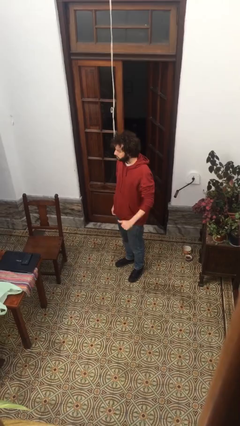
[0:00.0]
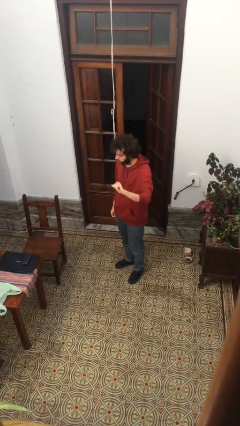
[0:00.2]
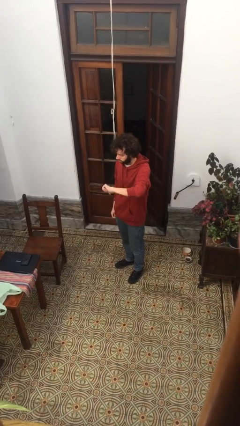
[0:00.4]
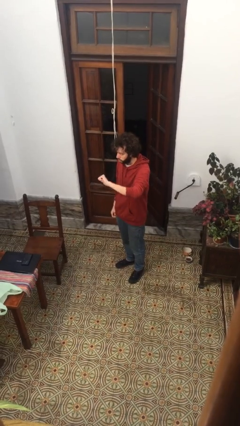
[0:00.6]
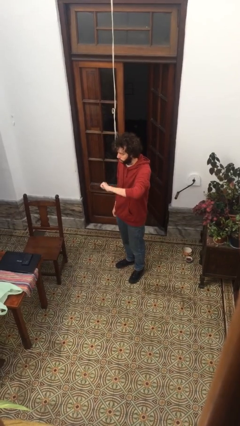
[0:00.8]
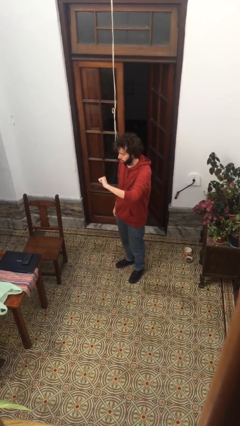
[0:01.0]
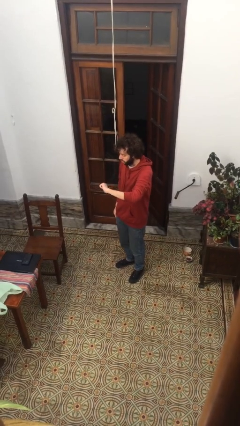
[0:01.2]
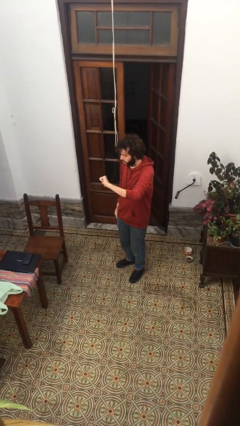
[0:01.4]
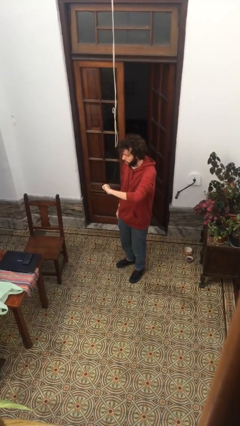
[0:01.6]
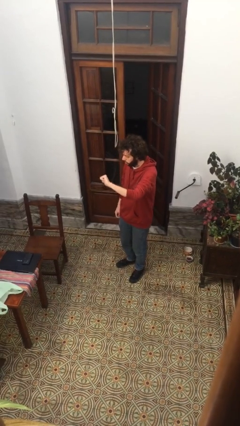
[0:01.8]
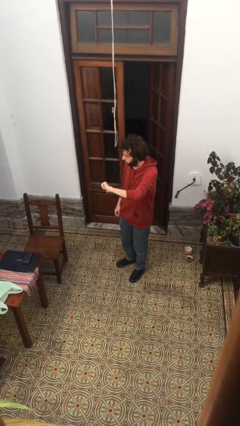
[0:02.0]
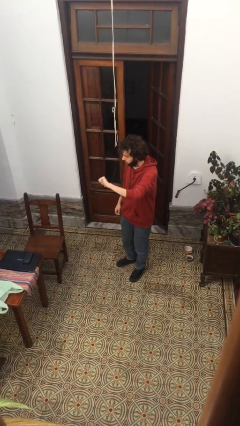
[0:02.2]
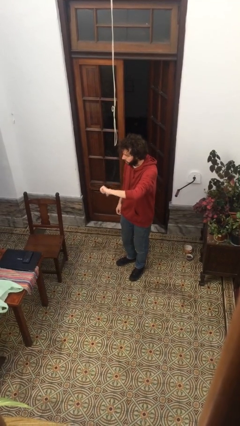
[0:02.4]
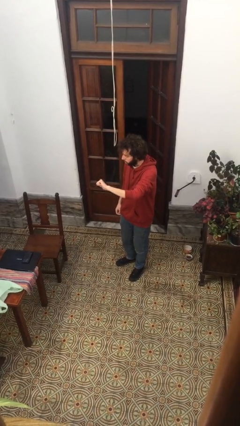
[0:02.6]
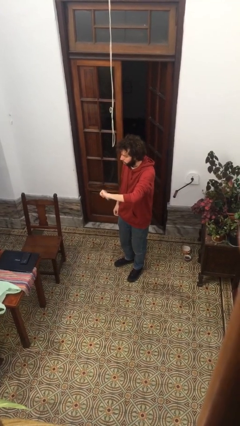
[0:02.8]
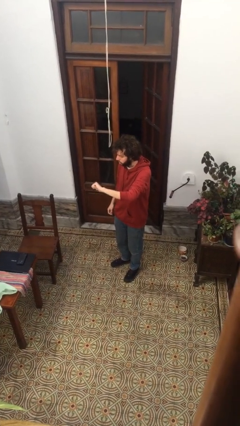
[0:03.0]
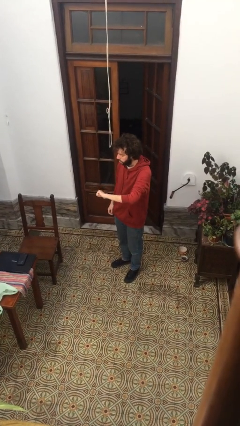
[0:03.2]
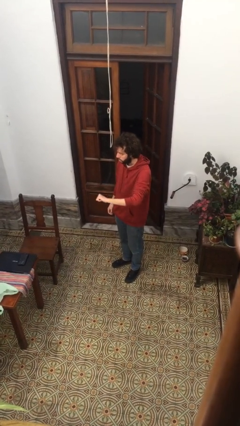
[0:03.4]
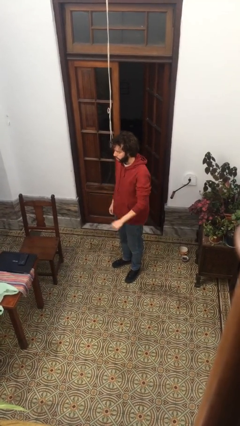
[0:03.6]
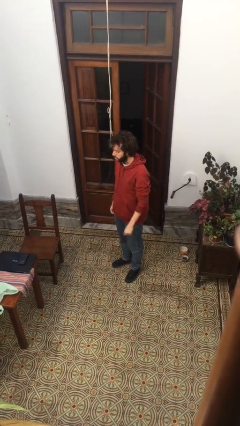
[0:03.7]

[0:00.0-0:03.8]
person gestures thumbs down

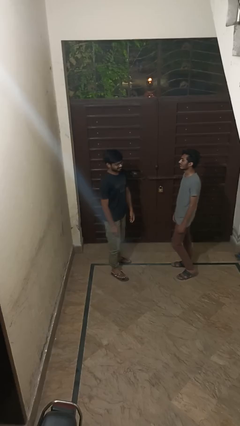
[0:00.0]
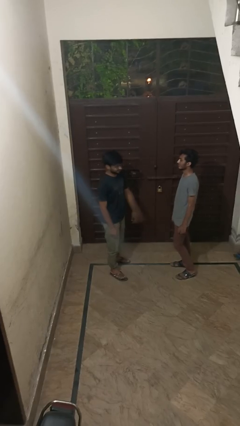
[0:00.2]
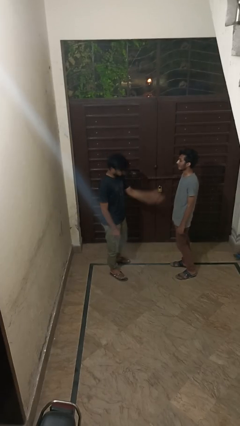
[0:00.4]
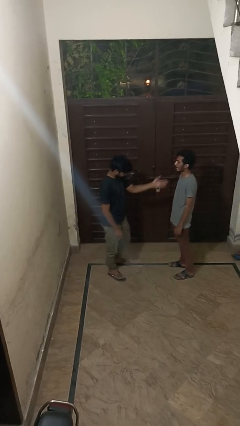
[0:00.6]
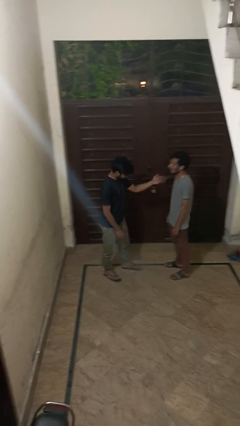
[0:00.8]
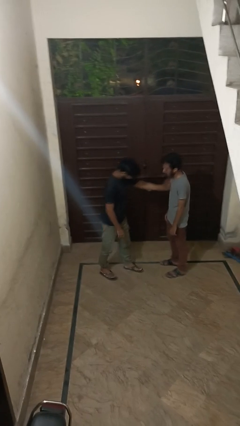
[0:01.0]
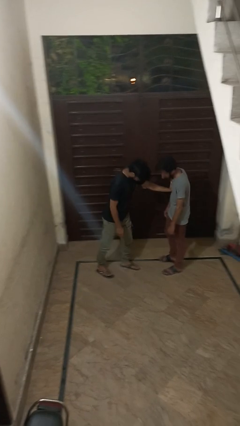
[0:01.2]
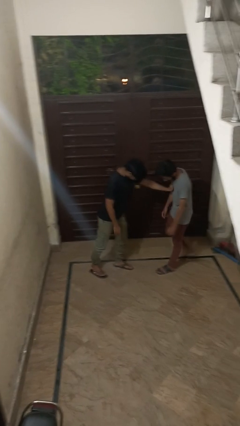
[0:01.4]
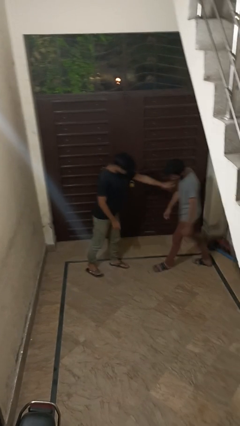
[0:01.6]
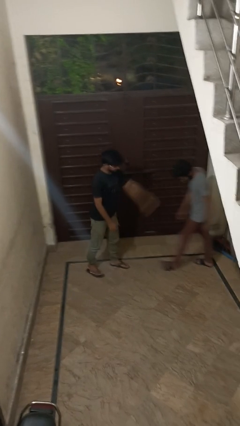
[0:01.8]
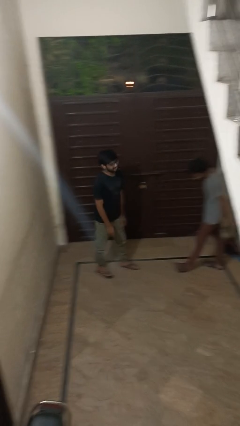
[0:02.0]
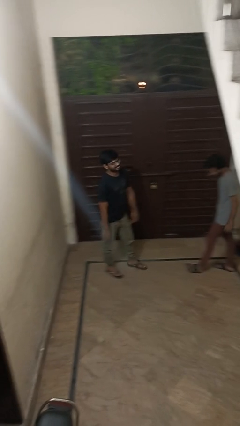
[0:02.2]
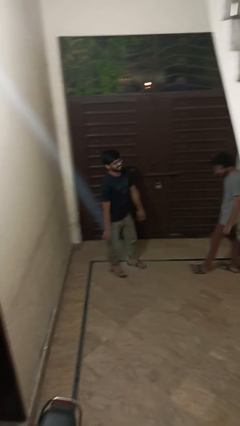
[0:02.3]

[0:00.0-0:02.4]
person shoves person

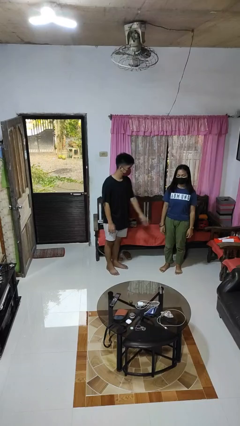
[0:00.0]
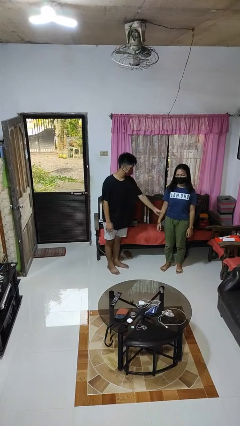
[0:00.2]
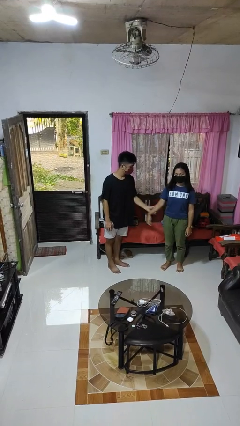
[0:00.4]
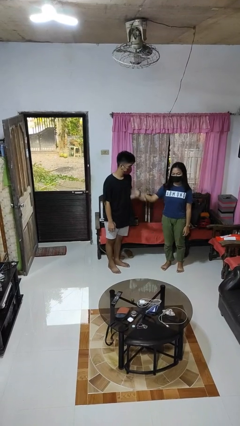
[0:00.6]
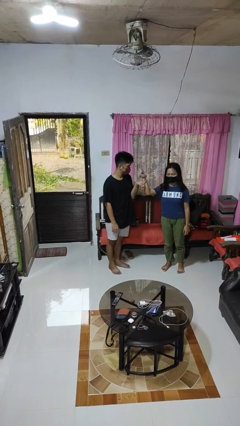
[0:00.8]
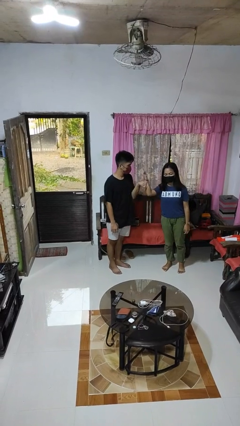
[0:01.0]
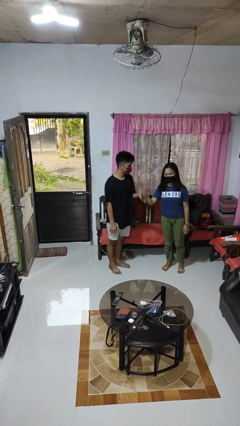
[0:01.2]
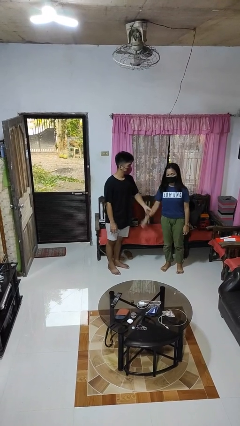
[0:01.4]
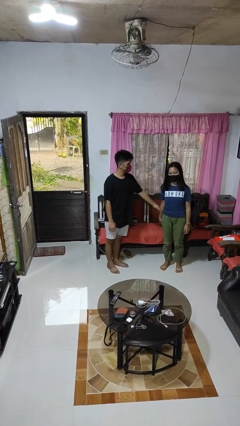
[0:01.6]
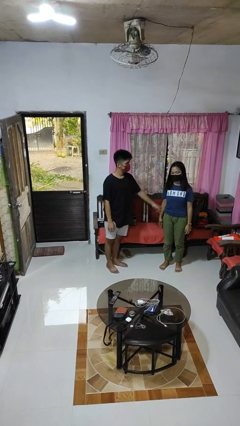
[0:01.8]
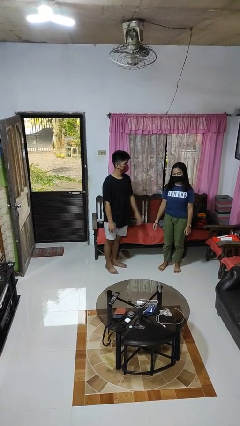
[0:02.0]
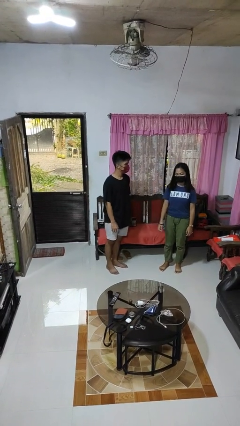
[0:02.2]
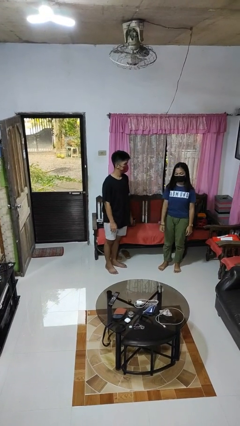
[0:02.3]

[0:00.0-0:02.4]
person grabs person by forearm

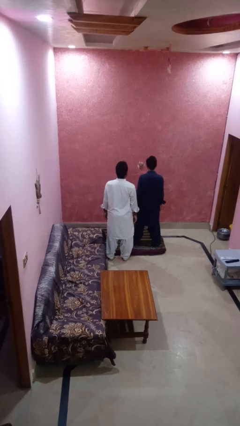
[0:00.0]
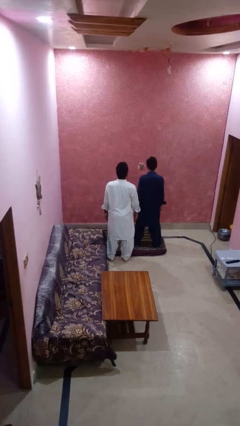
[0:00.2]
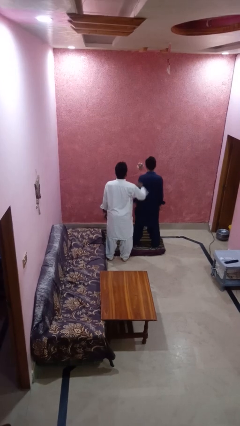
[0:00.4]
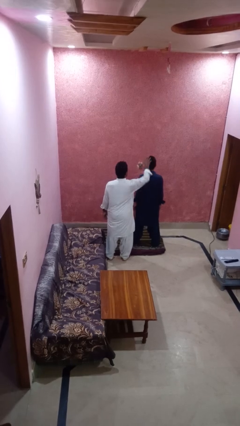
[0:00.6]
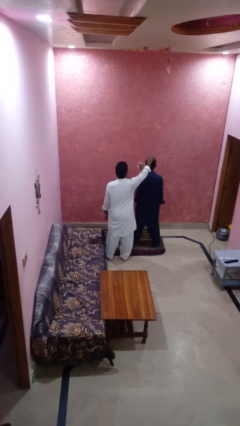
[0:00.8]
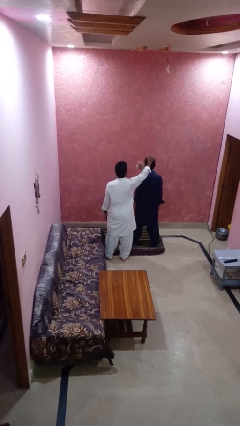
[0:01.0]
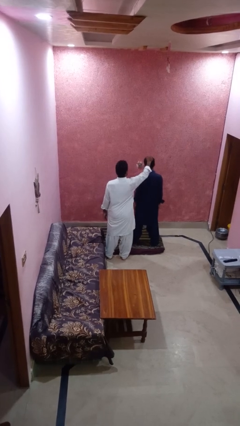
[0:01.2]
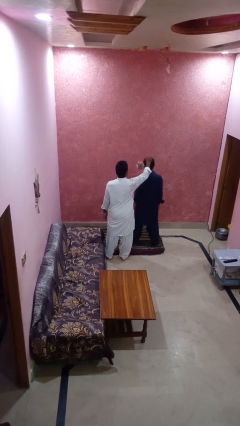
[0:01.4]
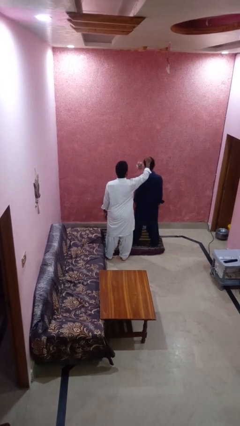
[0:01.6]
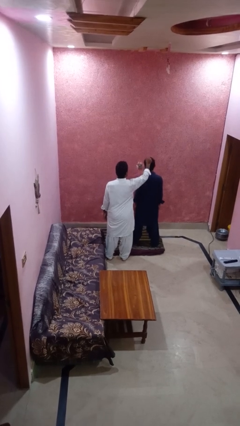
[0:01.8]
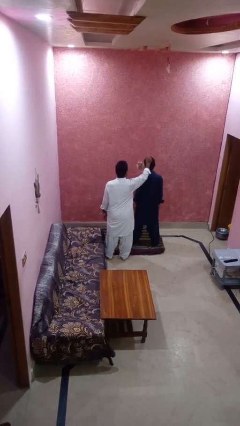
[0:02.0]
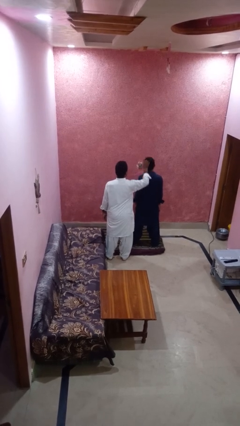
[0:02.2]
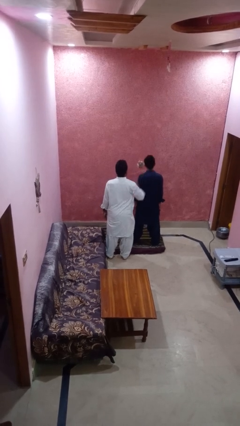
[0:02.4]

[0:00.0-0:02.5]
person grabs person by hair

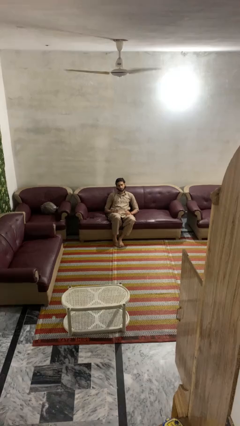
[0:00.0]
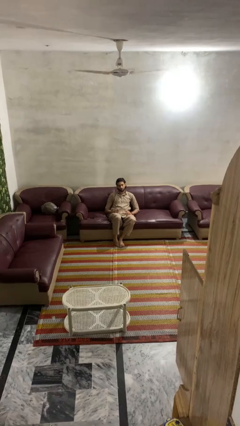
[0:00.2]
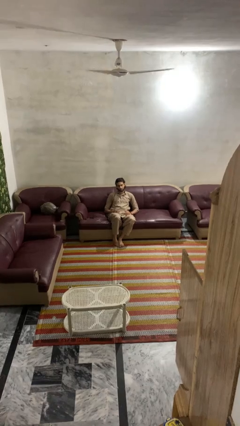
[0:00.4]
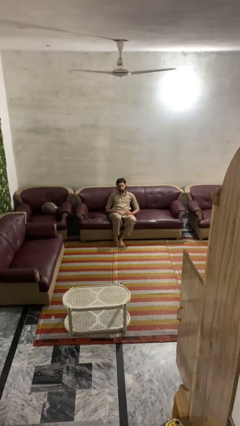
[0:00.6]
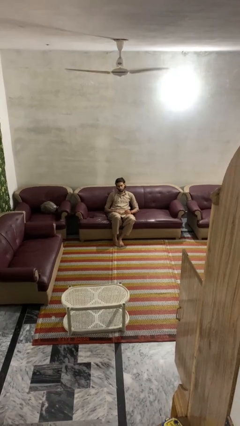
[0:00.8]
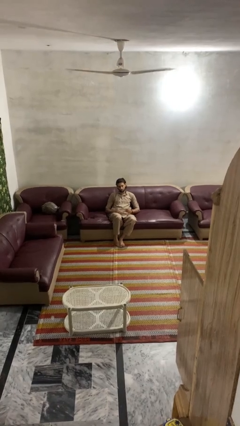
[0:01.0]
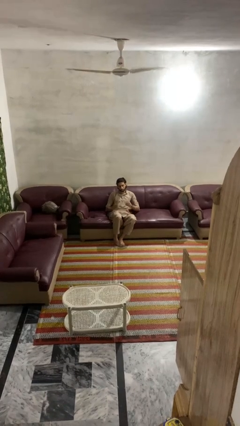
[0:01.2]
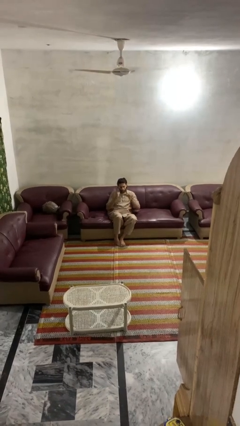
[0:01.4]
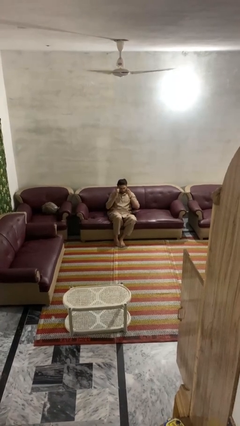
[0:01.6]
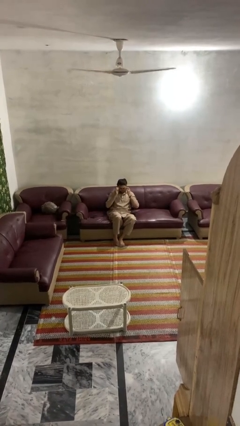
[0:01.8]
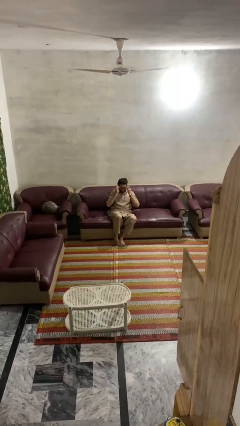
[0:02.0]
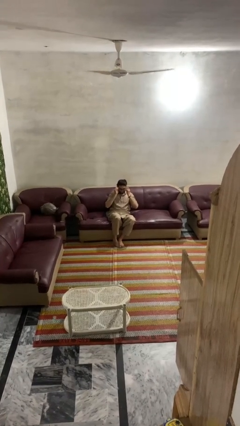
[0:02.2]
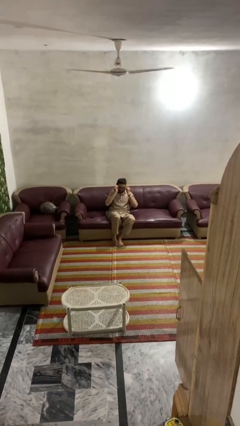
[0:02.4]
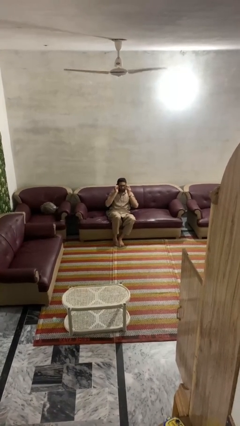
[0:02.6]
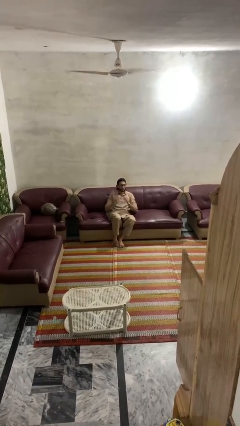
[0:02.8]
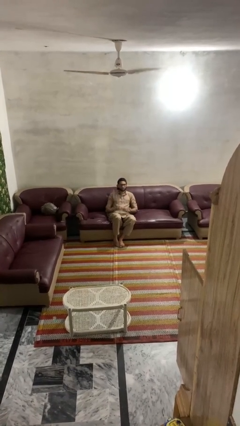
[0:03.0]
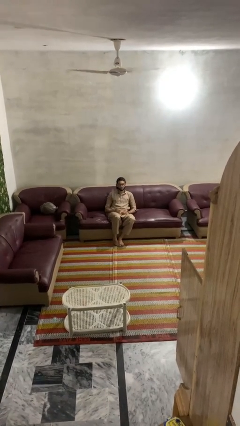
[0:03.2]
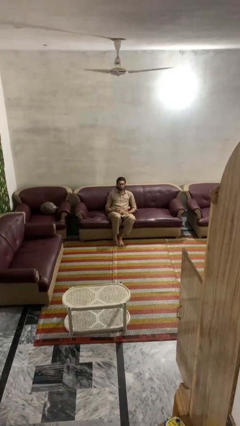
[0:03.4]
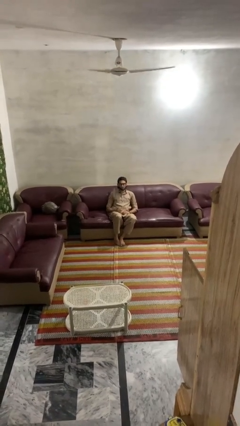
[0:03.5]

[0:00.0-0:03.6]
person puts on glasses

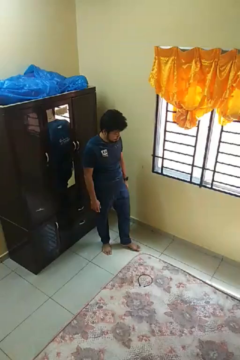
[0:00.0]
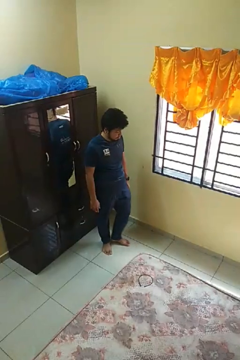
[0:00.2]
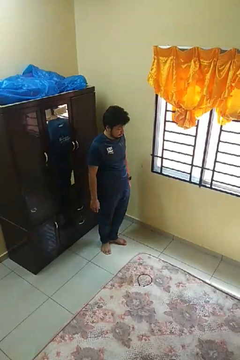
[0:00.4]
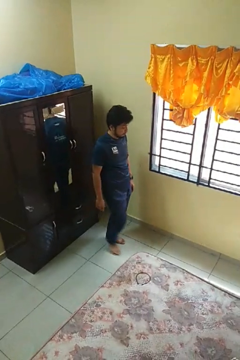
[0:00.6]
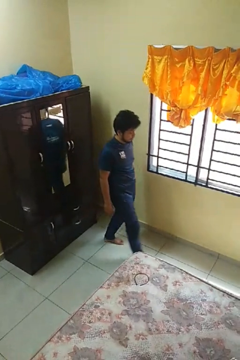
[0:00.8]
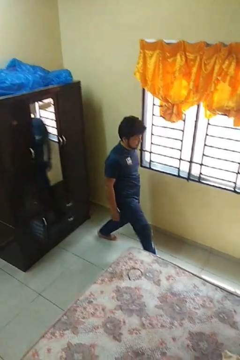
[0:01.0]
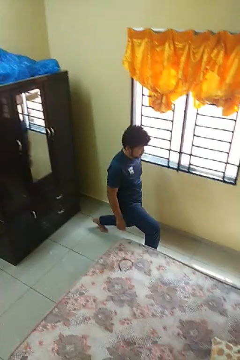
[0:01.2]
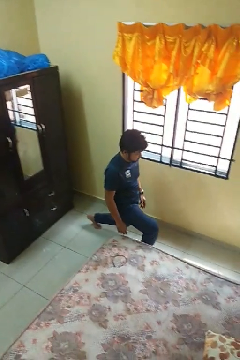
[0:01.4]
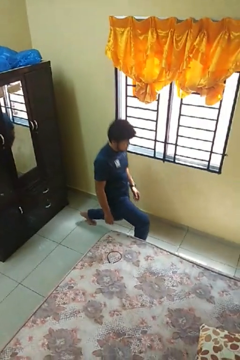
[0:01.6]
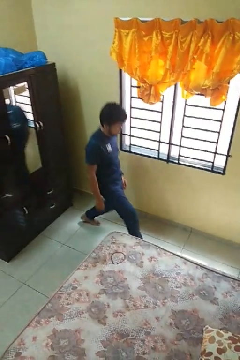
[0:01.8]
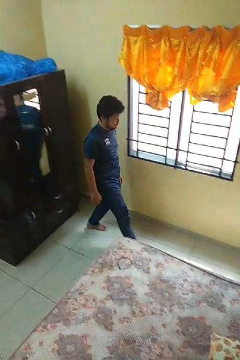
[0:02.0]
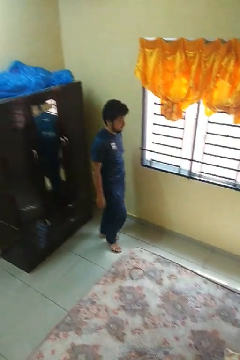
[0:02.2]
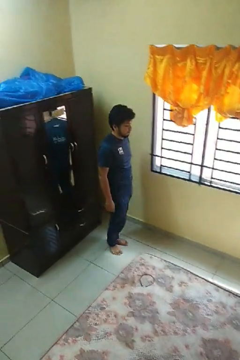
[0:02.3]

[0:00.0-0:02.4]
person exercises with lunges

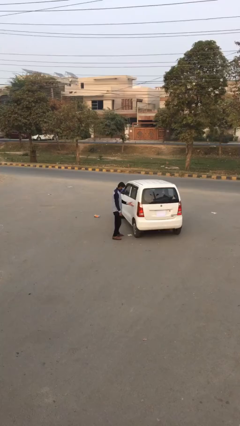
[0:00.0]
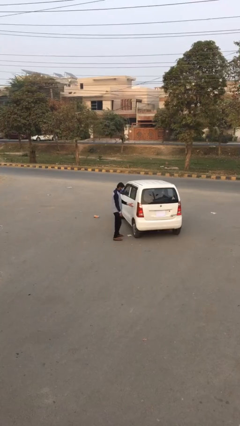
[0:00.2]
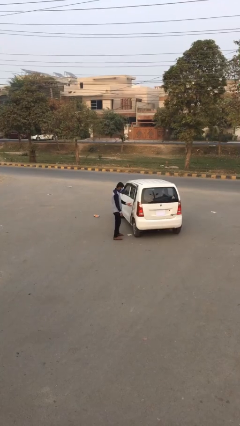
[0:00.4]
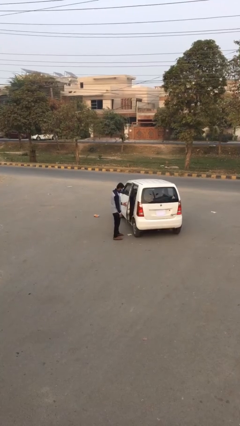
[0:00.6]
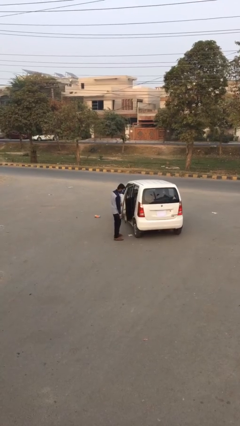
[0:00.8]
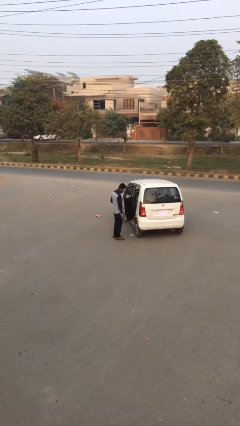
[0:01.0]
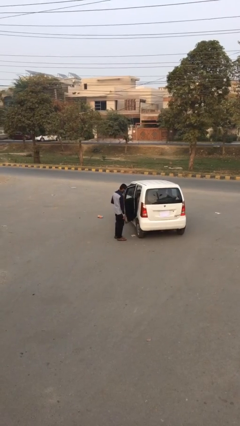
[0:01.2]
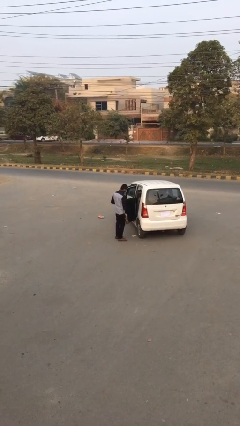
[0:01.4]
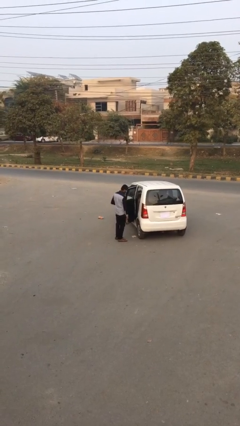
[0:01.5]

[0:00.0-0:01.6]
person opens car door
